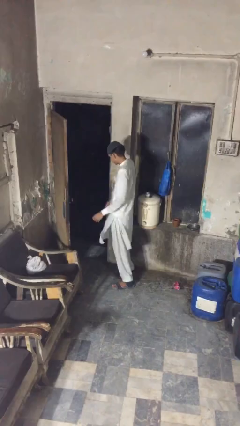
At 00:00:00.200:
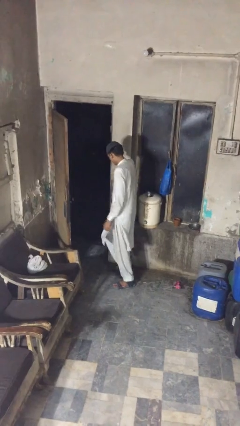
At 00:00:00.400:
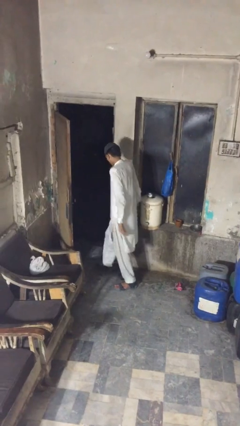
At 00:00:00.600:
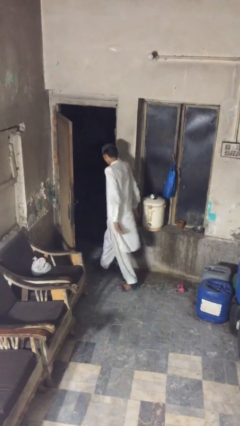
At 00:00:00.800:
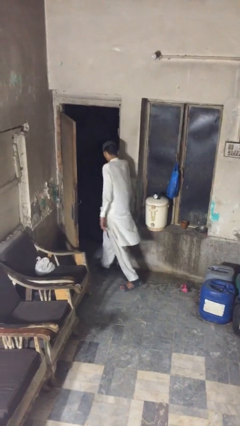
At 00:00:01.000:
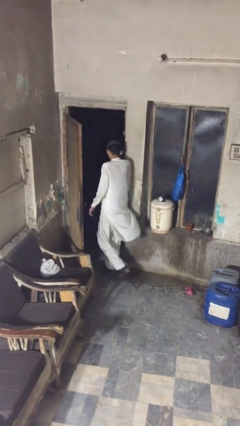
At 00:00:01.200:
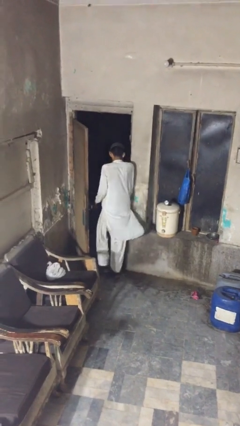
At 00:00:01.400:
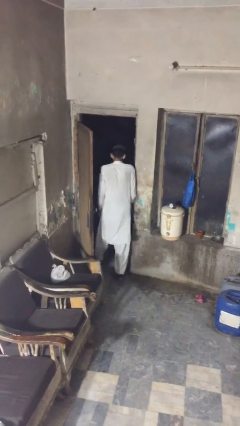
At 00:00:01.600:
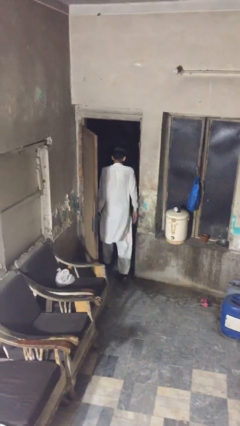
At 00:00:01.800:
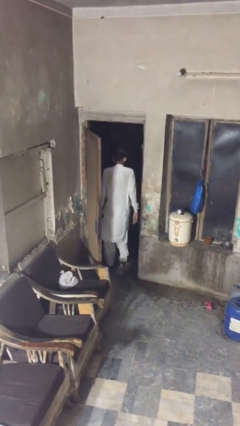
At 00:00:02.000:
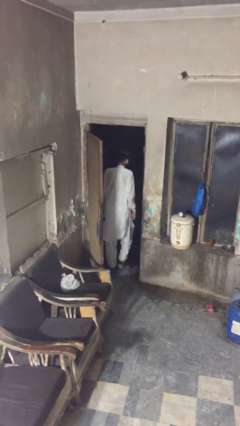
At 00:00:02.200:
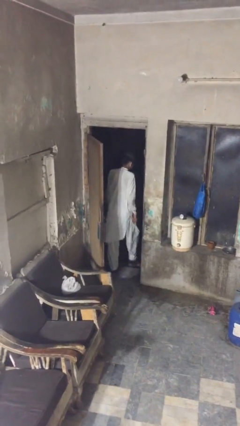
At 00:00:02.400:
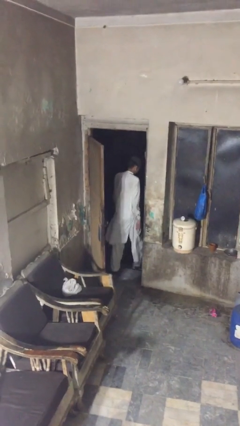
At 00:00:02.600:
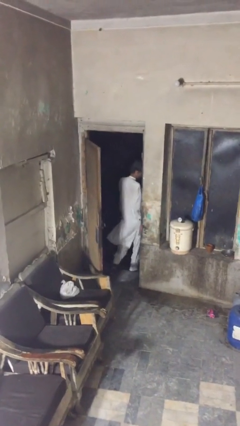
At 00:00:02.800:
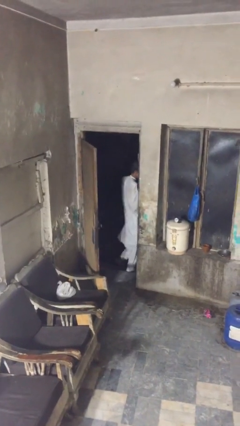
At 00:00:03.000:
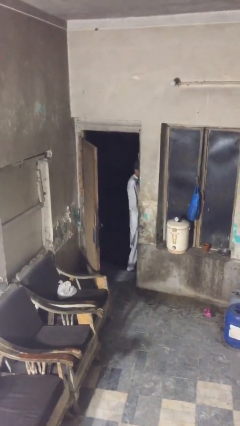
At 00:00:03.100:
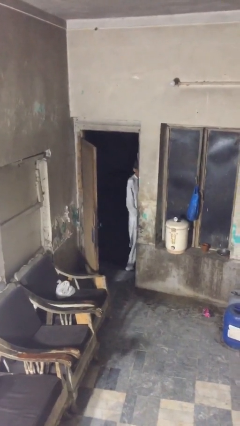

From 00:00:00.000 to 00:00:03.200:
person exits scene through structure

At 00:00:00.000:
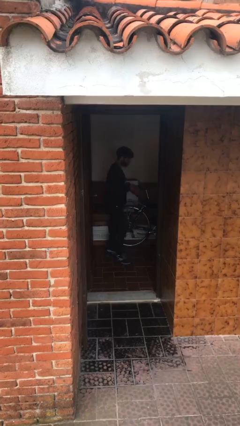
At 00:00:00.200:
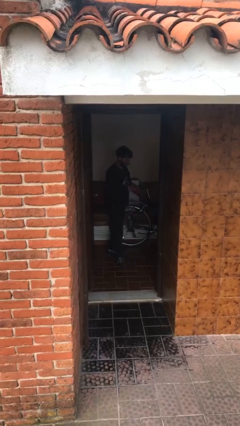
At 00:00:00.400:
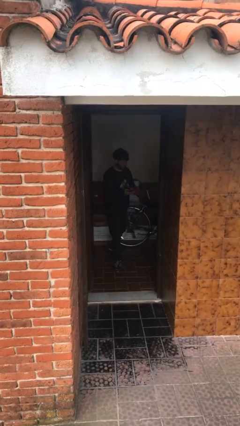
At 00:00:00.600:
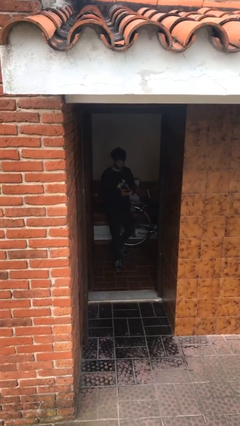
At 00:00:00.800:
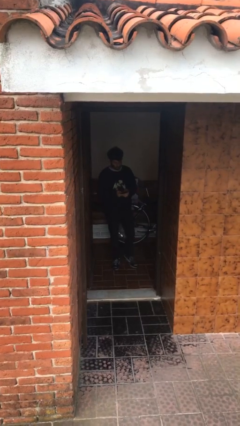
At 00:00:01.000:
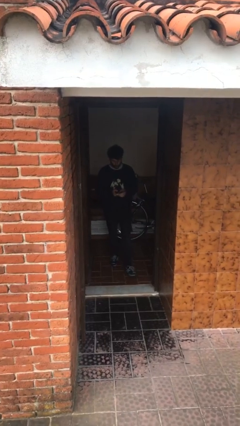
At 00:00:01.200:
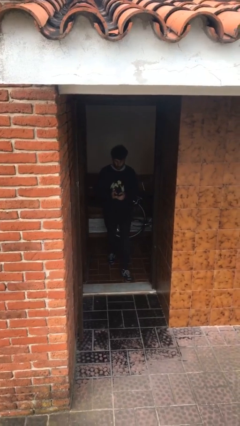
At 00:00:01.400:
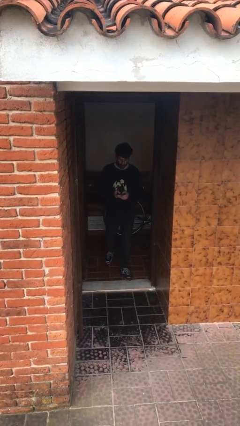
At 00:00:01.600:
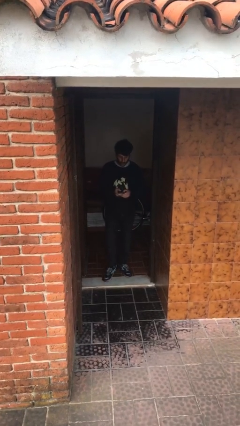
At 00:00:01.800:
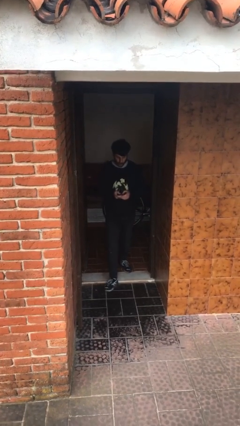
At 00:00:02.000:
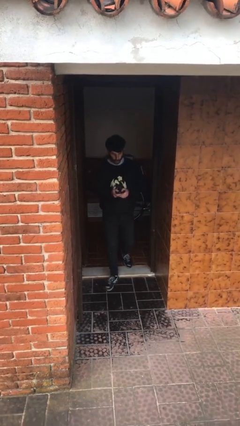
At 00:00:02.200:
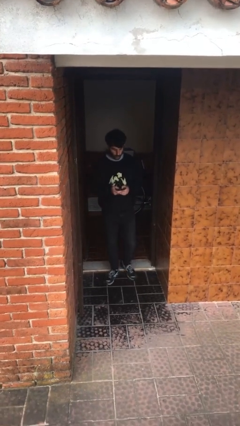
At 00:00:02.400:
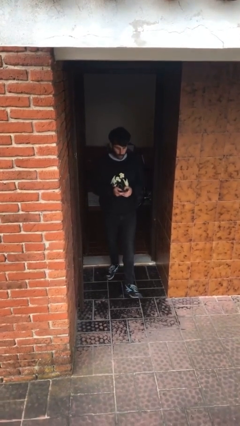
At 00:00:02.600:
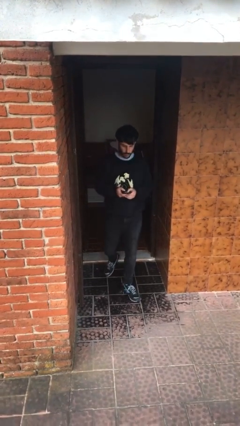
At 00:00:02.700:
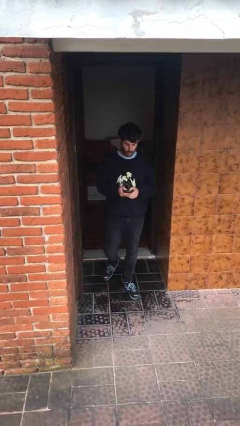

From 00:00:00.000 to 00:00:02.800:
person enters scene through structure

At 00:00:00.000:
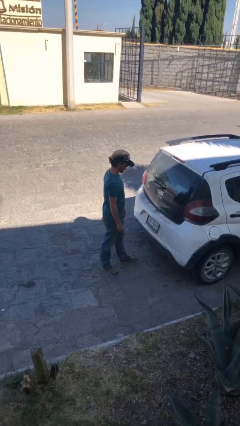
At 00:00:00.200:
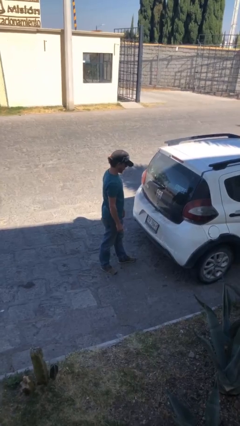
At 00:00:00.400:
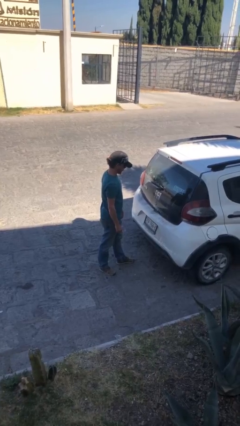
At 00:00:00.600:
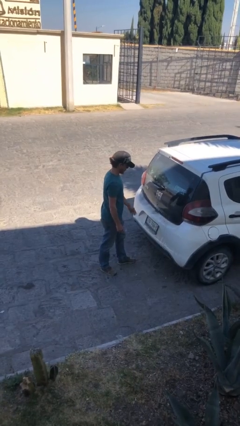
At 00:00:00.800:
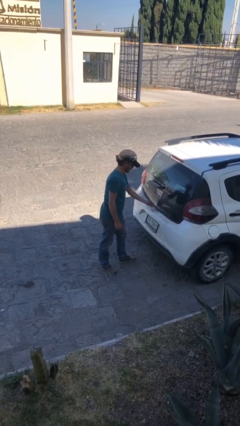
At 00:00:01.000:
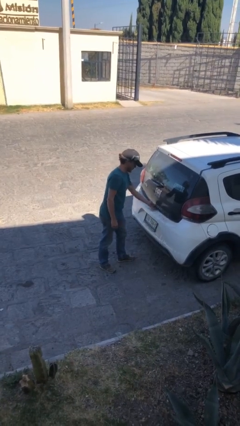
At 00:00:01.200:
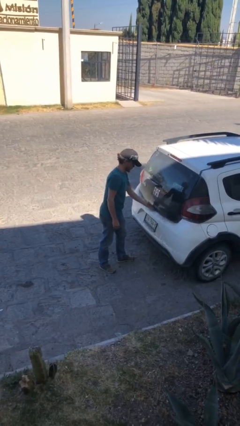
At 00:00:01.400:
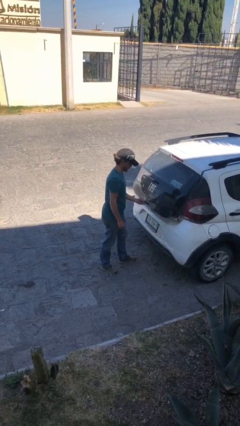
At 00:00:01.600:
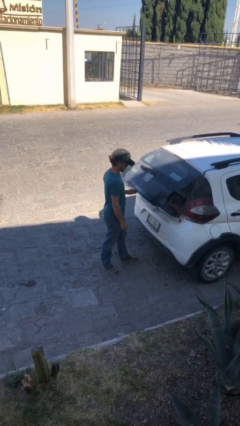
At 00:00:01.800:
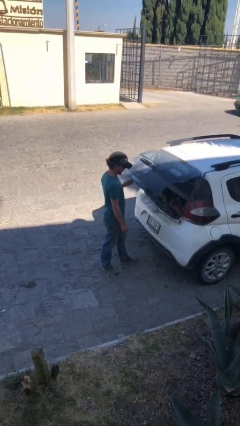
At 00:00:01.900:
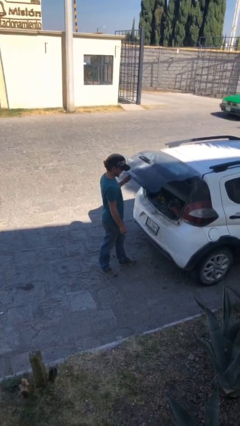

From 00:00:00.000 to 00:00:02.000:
person opens car trunk

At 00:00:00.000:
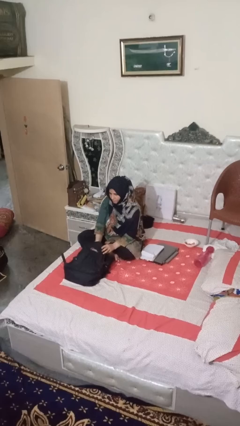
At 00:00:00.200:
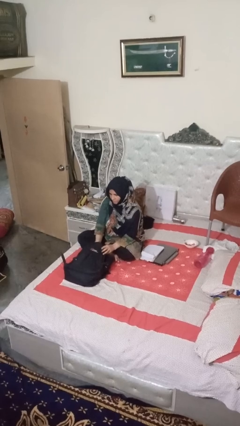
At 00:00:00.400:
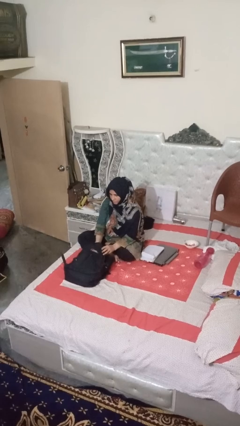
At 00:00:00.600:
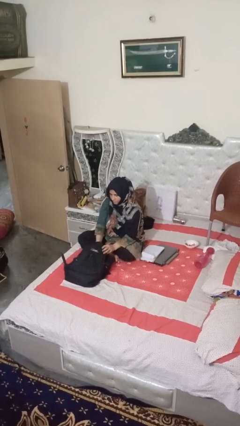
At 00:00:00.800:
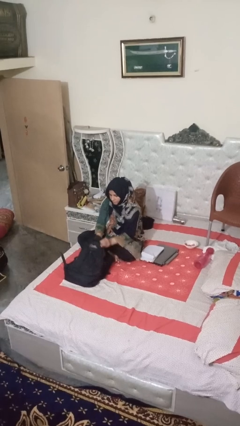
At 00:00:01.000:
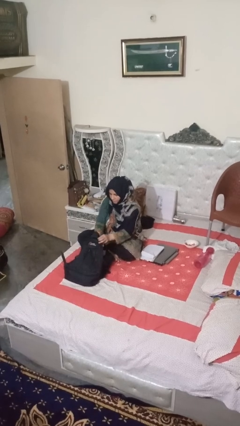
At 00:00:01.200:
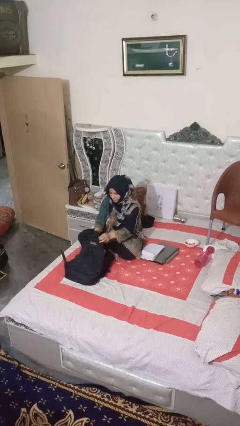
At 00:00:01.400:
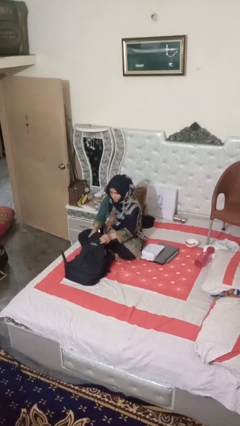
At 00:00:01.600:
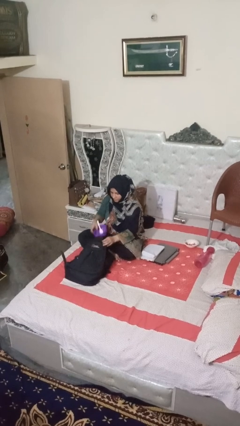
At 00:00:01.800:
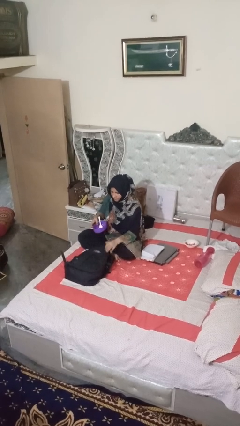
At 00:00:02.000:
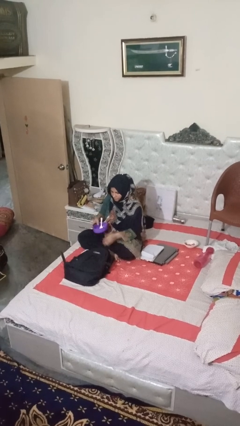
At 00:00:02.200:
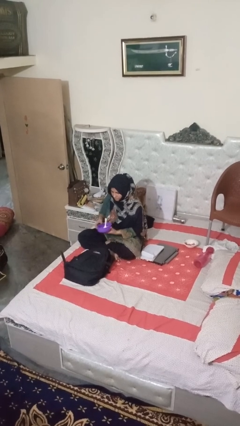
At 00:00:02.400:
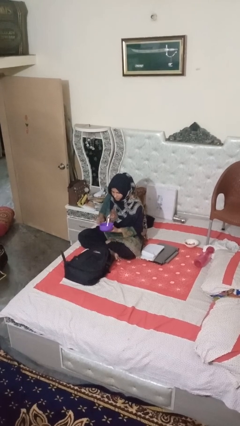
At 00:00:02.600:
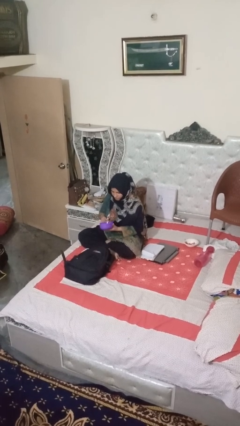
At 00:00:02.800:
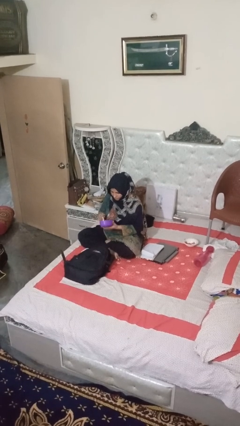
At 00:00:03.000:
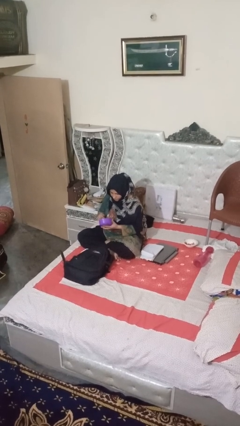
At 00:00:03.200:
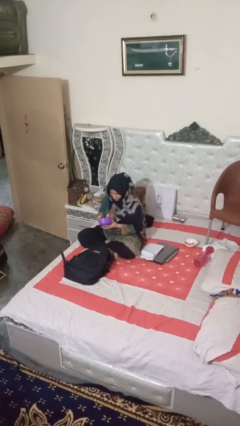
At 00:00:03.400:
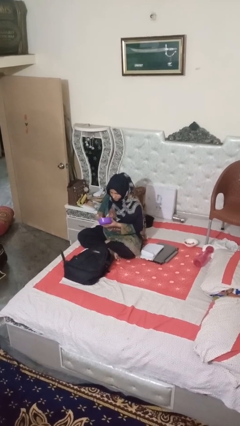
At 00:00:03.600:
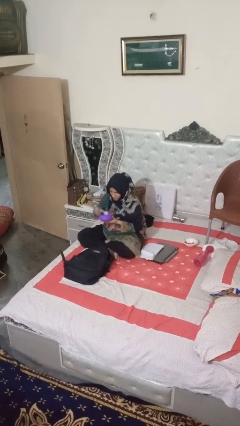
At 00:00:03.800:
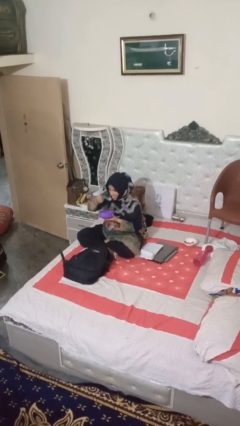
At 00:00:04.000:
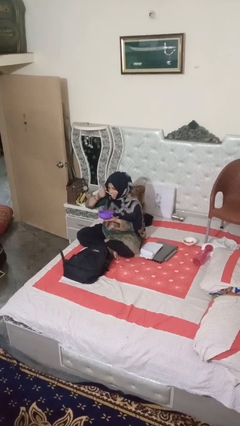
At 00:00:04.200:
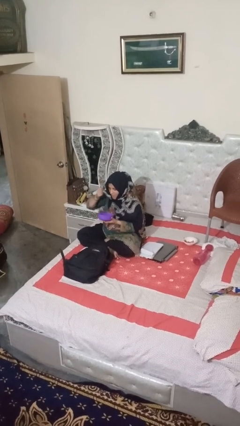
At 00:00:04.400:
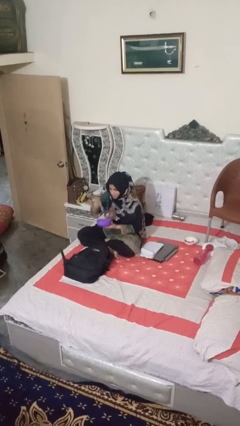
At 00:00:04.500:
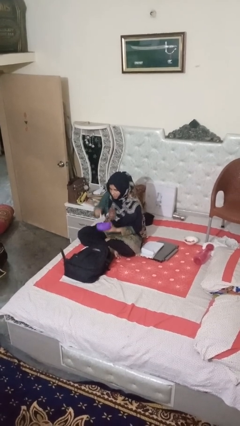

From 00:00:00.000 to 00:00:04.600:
person eats snack from bag

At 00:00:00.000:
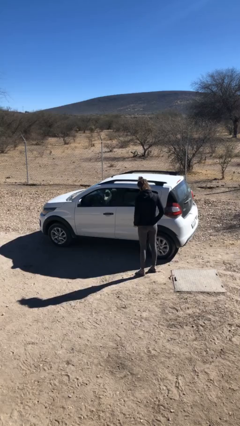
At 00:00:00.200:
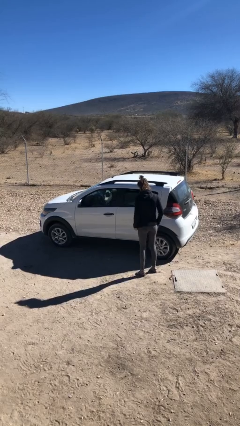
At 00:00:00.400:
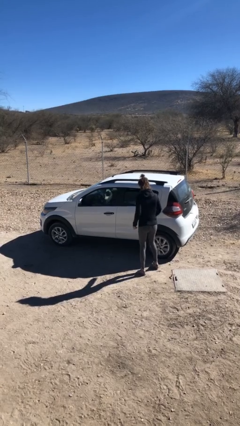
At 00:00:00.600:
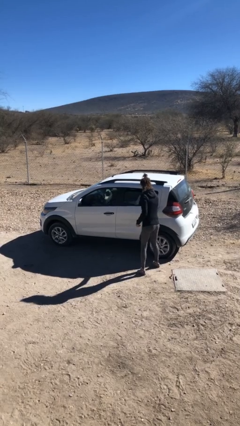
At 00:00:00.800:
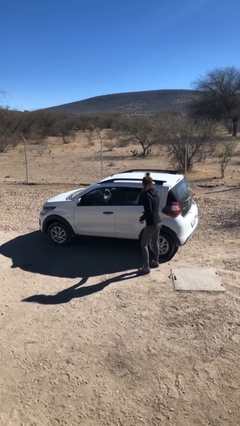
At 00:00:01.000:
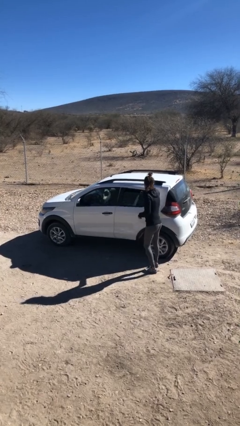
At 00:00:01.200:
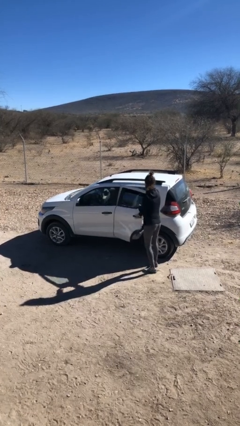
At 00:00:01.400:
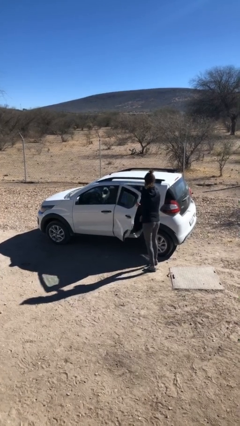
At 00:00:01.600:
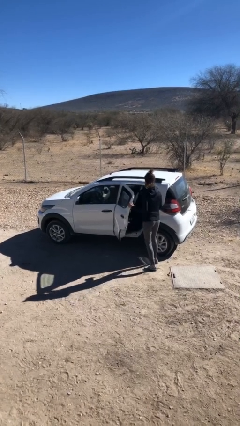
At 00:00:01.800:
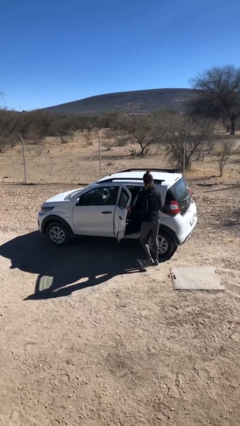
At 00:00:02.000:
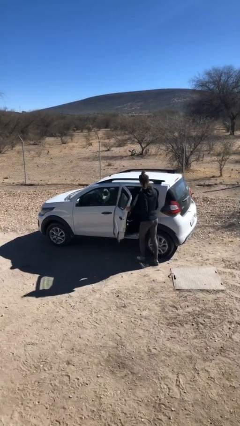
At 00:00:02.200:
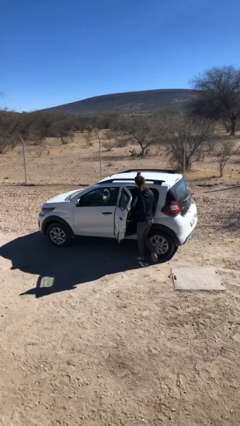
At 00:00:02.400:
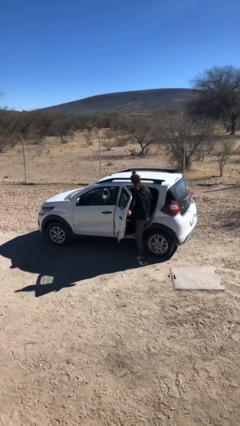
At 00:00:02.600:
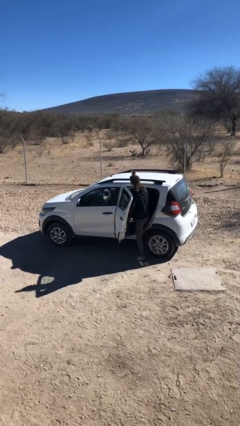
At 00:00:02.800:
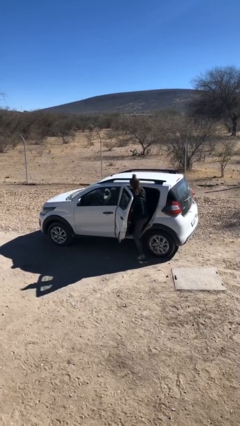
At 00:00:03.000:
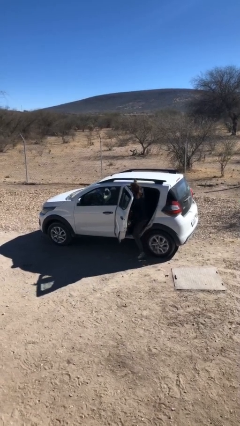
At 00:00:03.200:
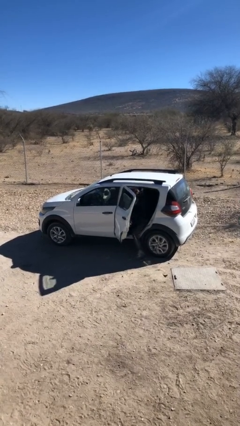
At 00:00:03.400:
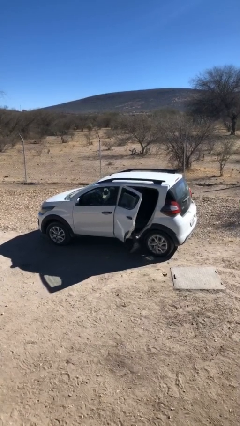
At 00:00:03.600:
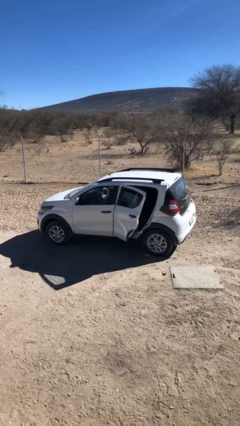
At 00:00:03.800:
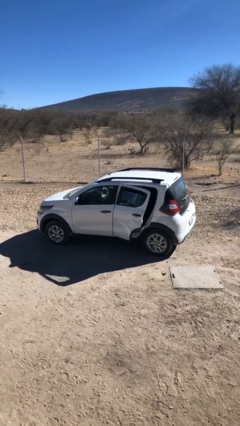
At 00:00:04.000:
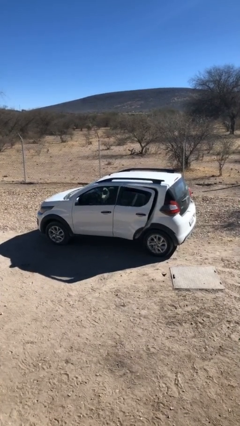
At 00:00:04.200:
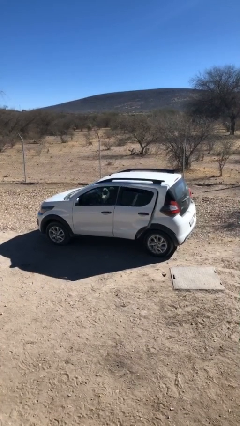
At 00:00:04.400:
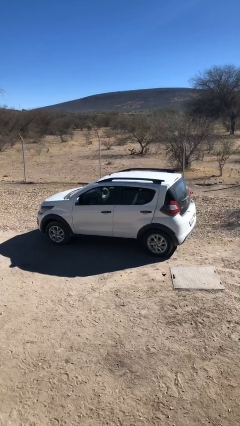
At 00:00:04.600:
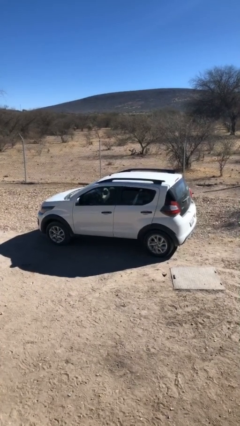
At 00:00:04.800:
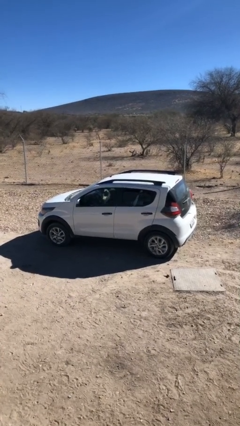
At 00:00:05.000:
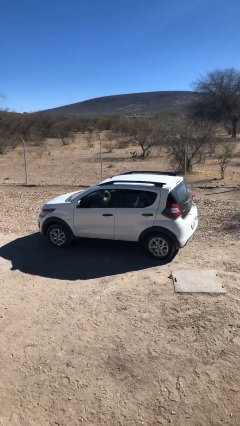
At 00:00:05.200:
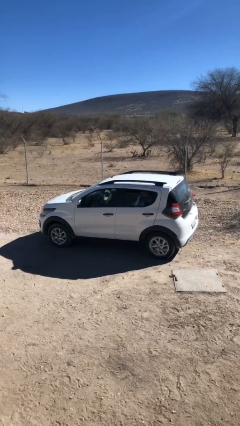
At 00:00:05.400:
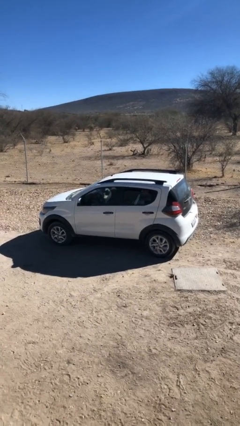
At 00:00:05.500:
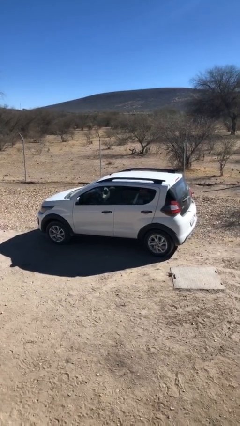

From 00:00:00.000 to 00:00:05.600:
car picks up person
